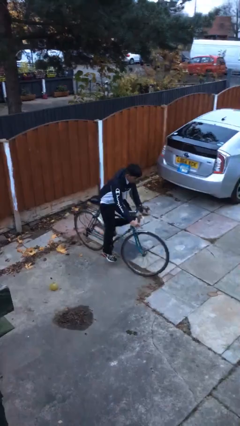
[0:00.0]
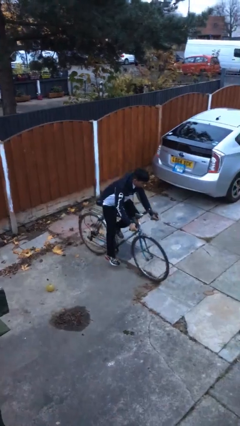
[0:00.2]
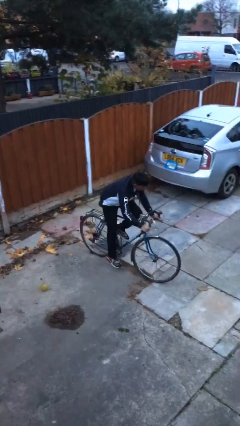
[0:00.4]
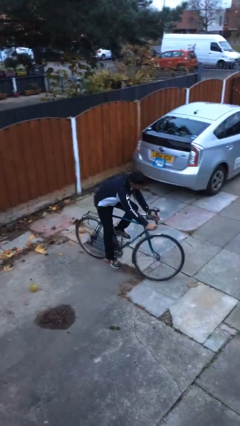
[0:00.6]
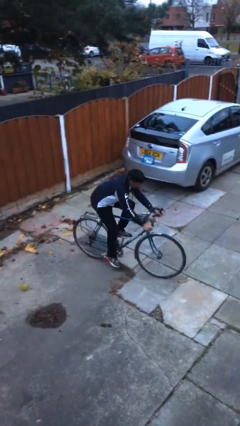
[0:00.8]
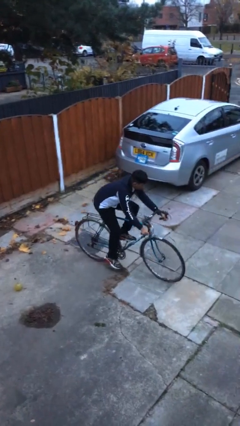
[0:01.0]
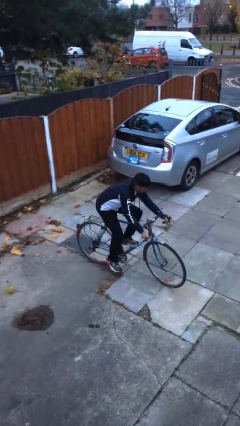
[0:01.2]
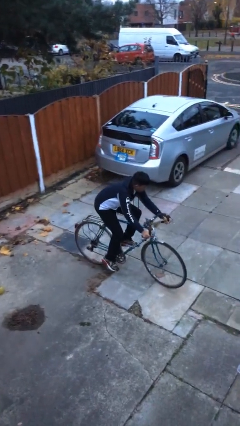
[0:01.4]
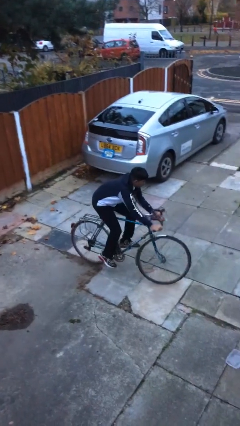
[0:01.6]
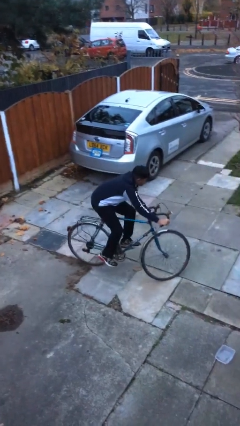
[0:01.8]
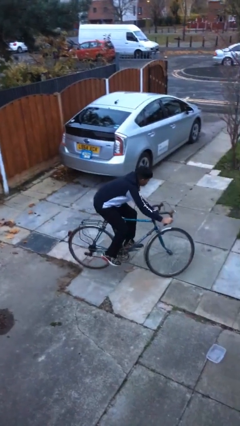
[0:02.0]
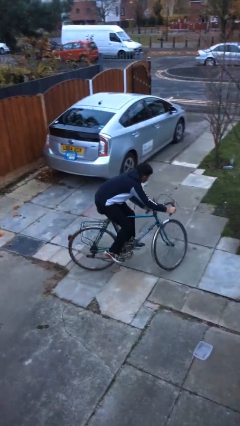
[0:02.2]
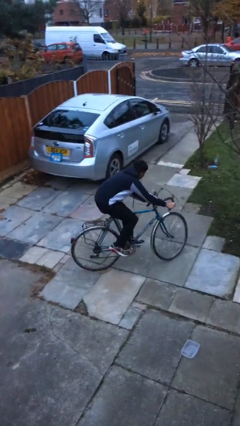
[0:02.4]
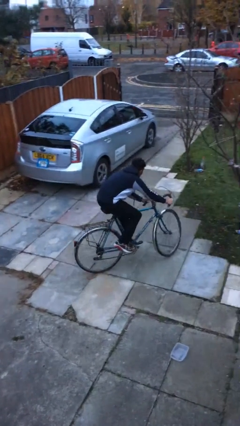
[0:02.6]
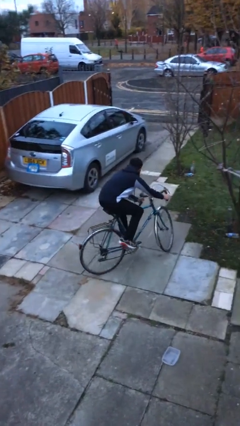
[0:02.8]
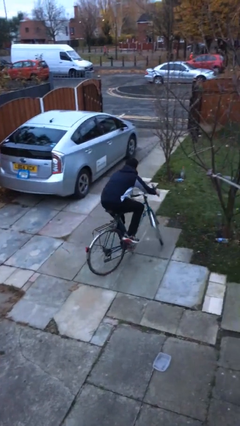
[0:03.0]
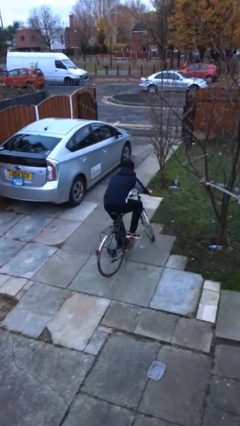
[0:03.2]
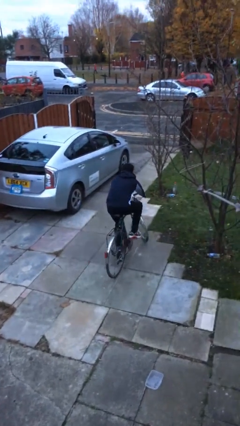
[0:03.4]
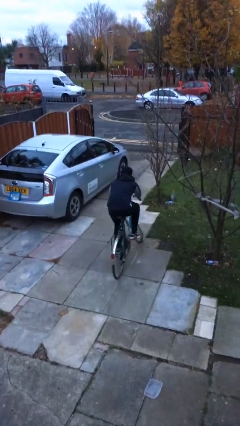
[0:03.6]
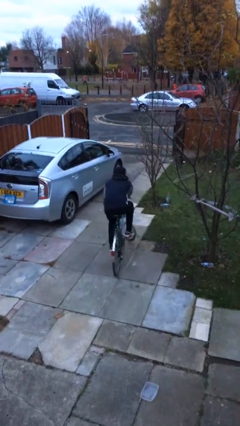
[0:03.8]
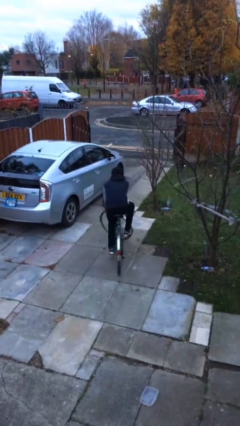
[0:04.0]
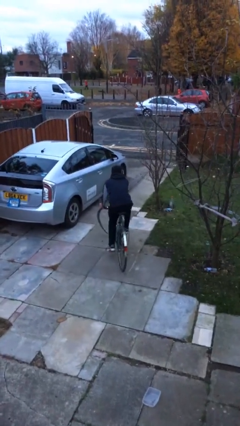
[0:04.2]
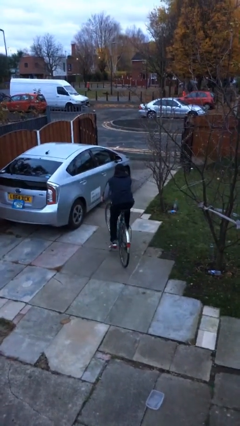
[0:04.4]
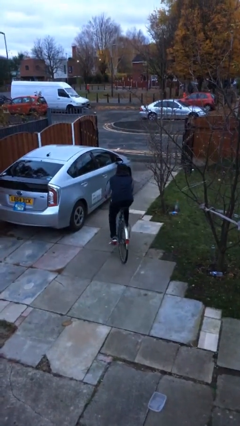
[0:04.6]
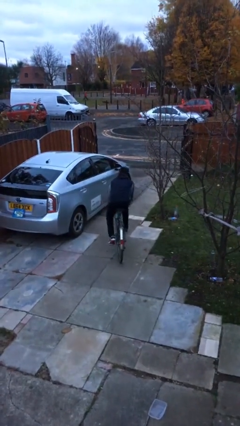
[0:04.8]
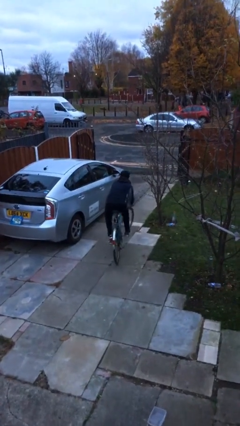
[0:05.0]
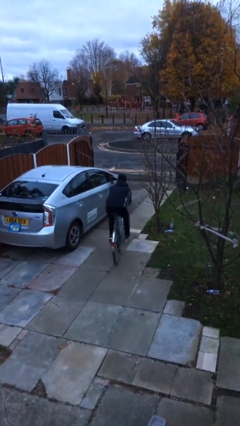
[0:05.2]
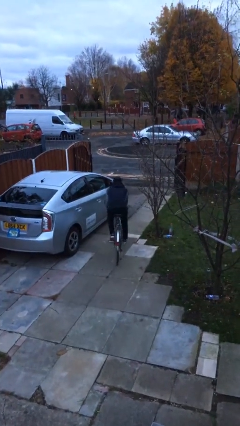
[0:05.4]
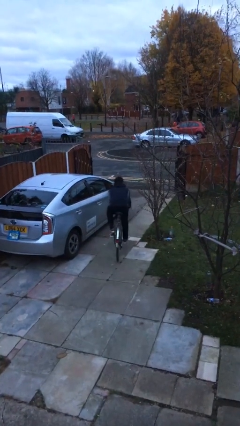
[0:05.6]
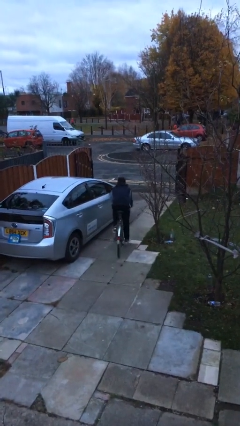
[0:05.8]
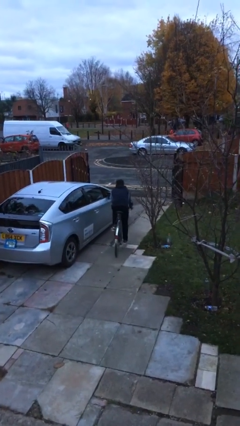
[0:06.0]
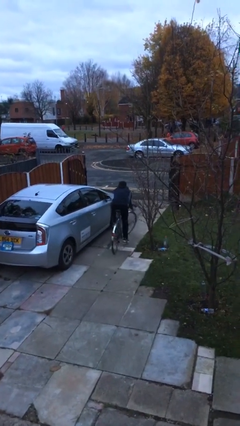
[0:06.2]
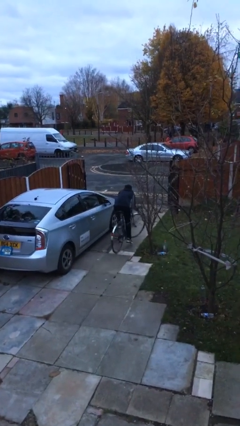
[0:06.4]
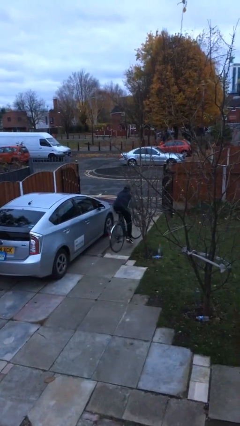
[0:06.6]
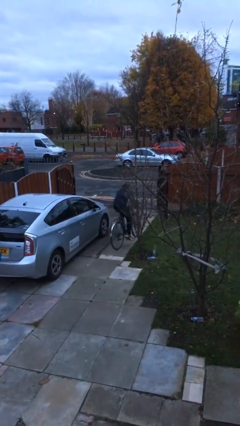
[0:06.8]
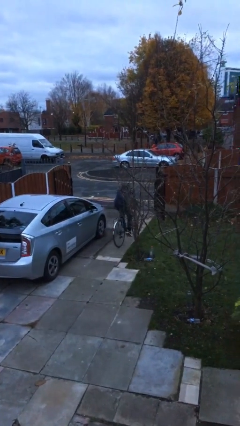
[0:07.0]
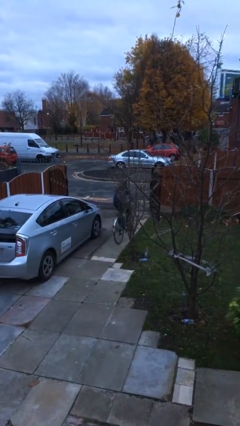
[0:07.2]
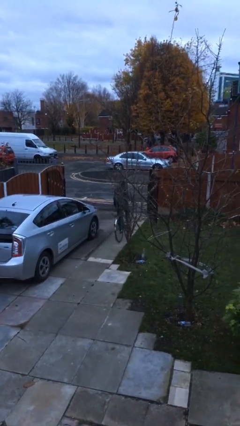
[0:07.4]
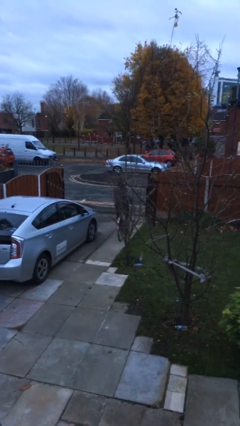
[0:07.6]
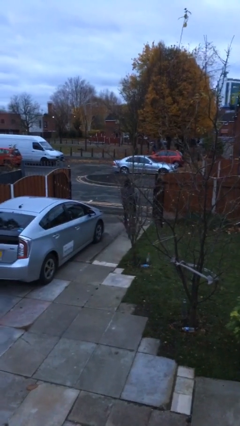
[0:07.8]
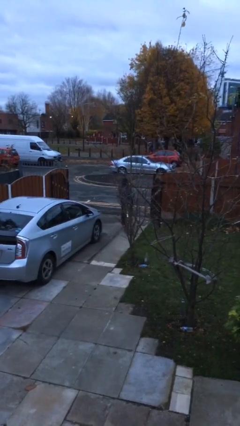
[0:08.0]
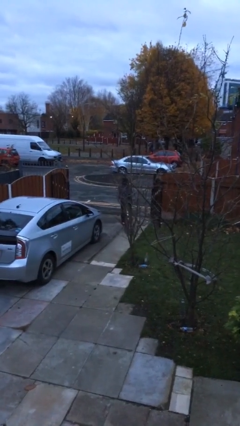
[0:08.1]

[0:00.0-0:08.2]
person rides bicycle

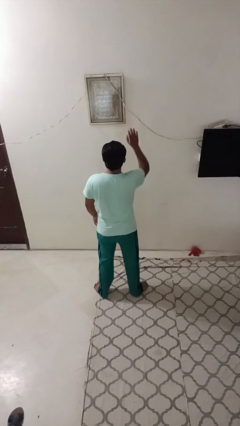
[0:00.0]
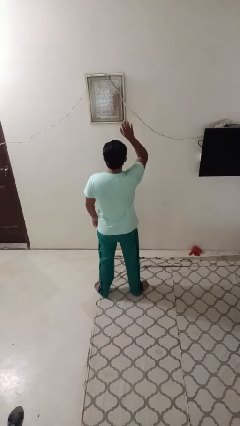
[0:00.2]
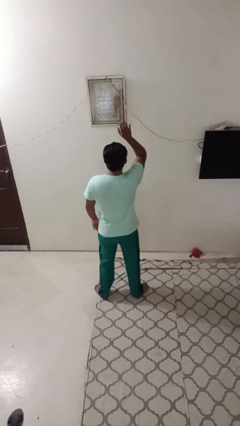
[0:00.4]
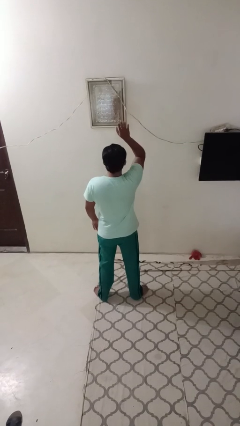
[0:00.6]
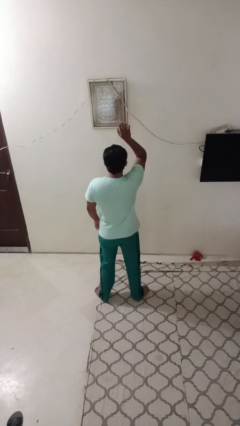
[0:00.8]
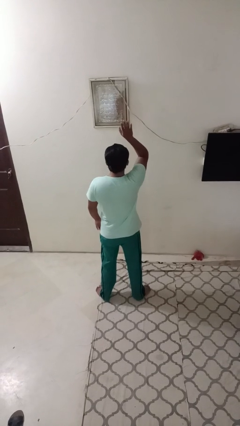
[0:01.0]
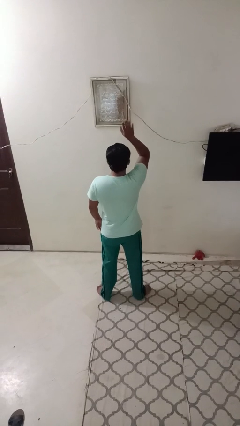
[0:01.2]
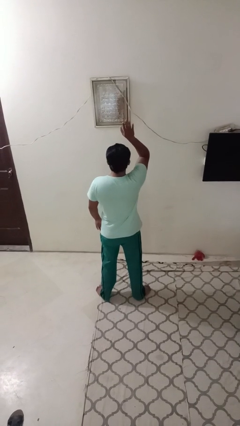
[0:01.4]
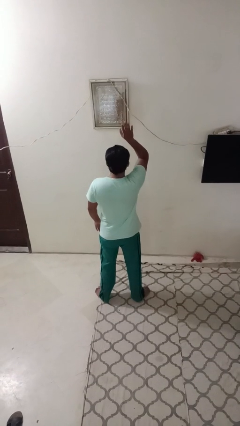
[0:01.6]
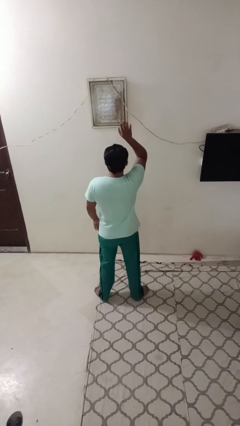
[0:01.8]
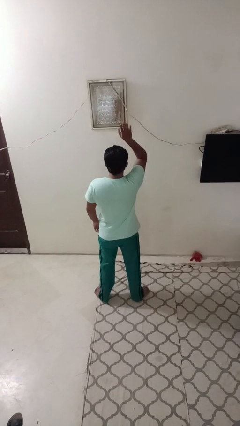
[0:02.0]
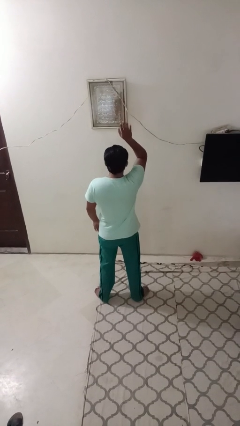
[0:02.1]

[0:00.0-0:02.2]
person gestures raise hand

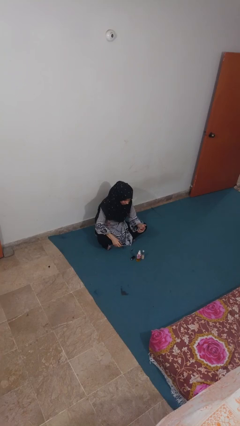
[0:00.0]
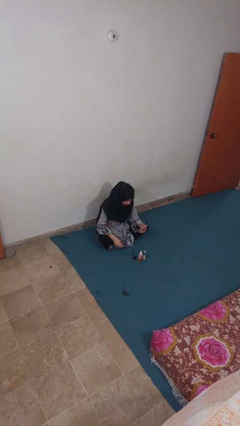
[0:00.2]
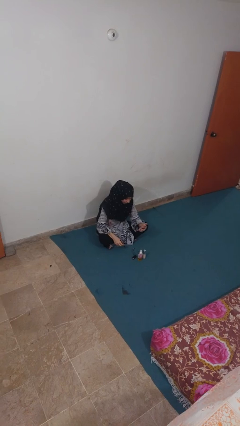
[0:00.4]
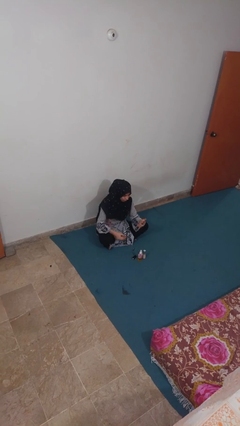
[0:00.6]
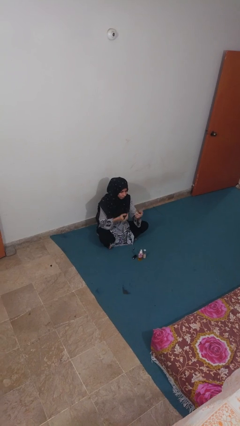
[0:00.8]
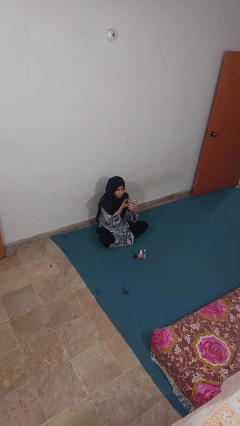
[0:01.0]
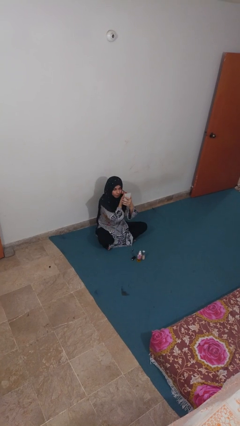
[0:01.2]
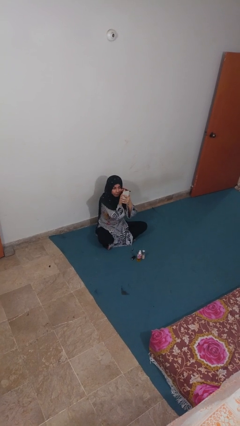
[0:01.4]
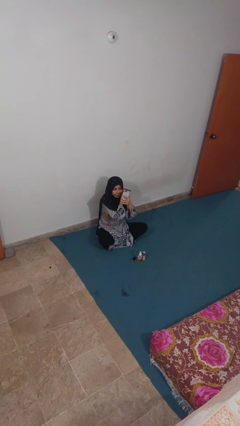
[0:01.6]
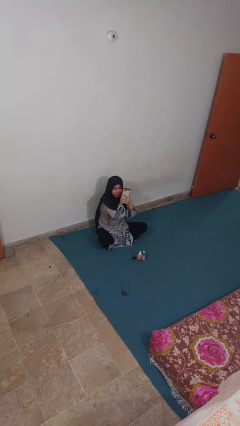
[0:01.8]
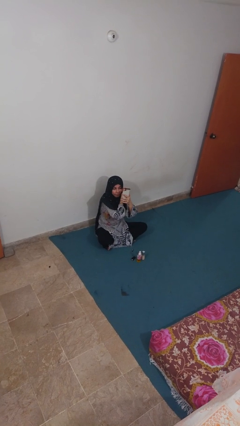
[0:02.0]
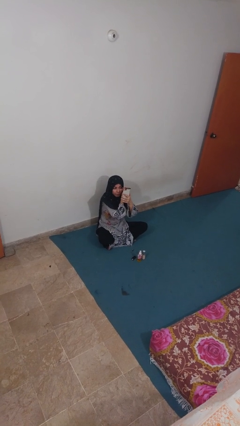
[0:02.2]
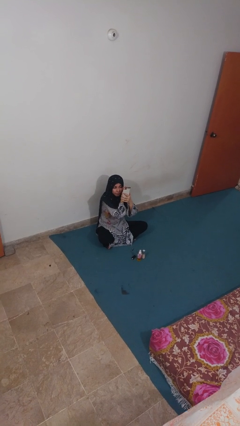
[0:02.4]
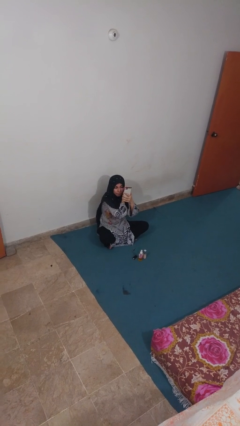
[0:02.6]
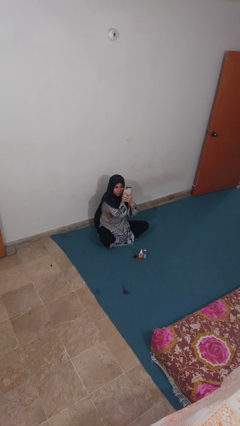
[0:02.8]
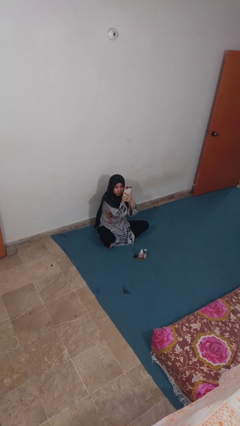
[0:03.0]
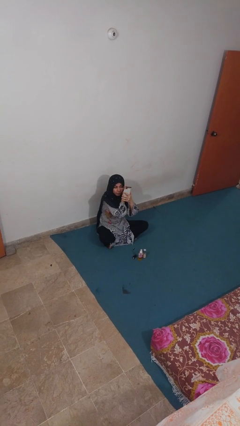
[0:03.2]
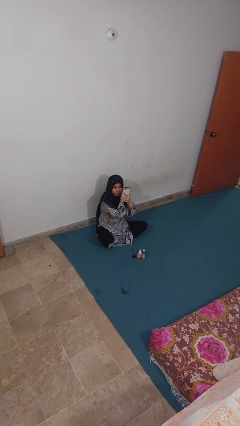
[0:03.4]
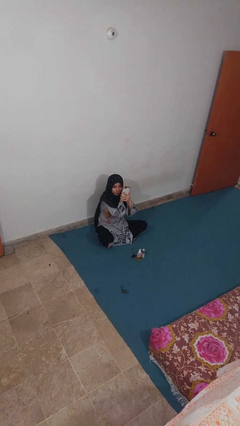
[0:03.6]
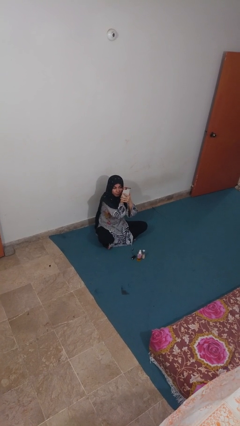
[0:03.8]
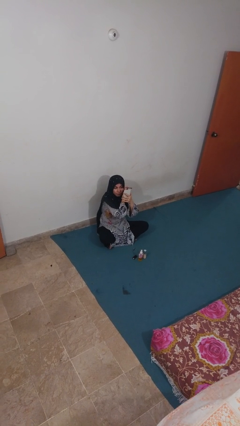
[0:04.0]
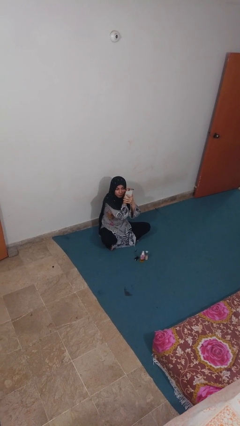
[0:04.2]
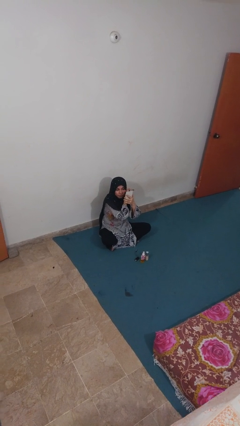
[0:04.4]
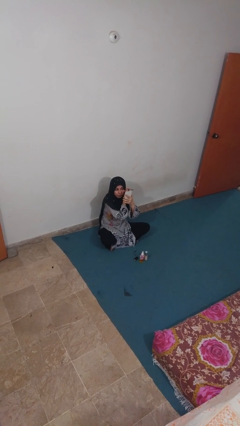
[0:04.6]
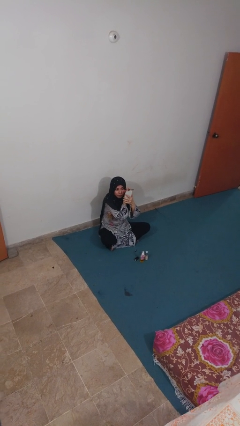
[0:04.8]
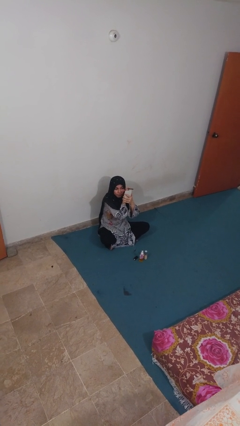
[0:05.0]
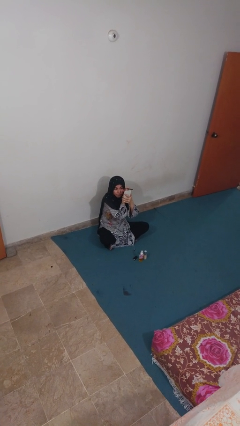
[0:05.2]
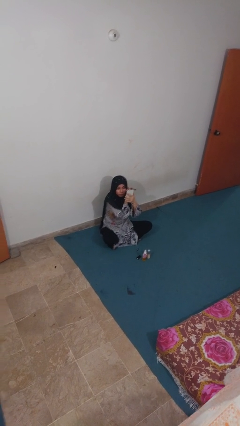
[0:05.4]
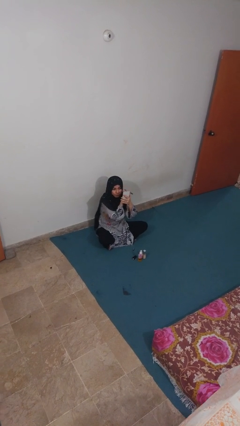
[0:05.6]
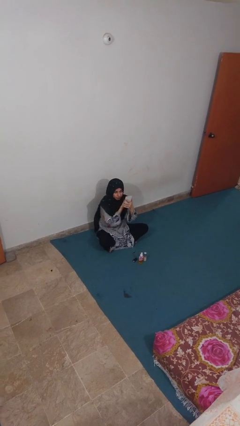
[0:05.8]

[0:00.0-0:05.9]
person applies eye makeup

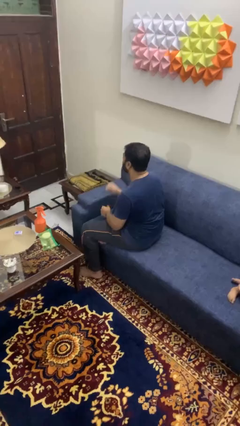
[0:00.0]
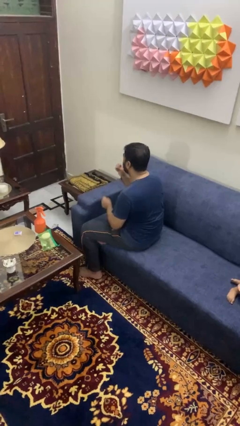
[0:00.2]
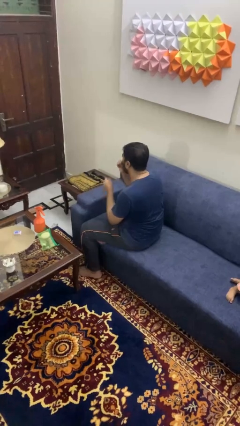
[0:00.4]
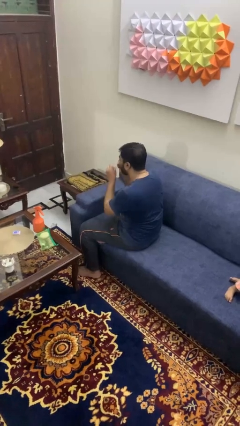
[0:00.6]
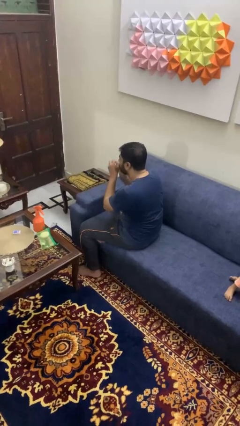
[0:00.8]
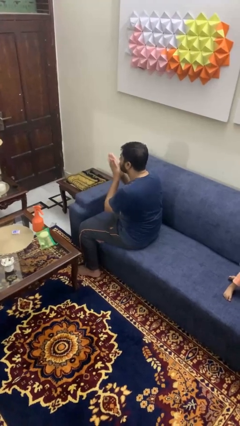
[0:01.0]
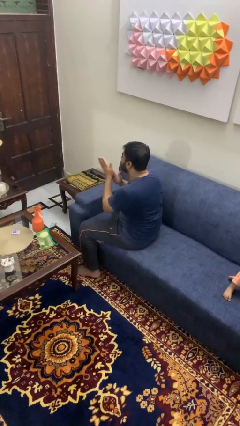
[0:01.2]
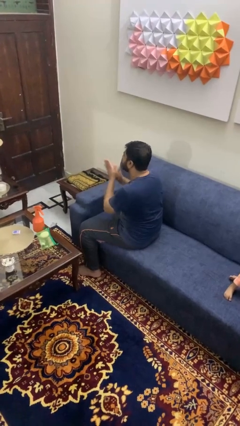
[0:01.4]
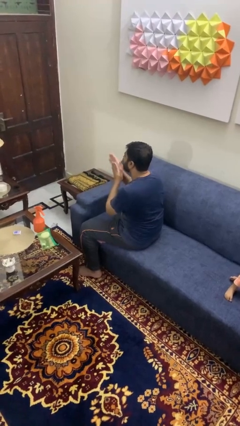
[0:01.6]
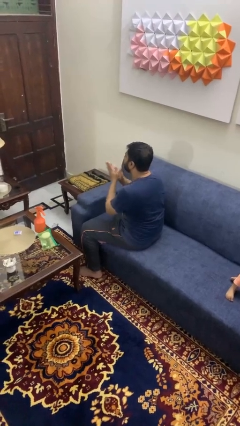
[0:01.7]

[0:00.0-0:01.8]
person blows into hands
